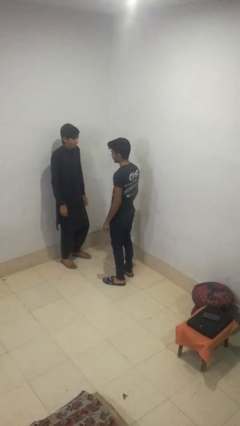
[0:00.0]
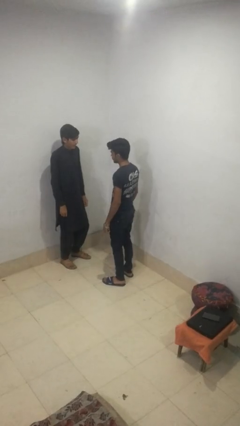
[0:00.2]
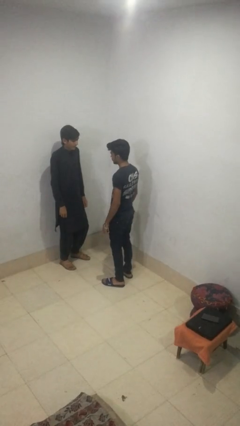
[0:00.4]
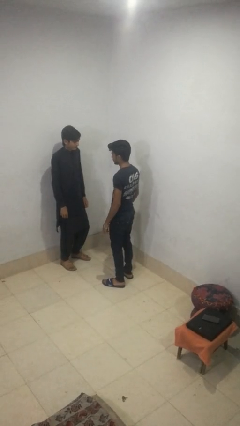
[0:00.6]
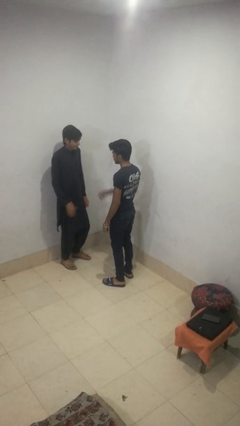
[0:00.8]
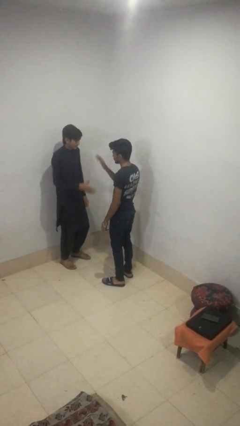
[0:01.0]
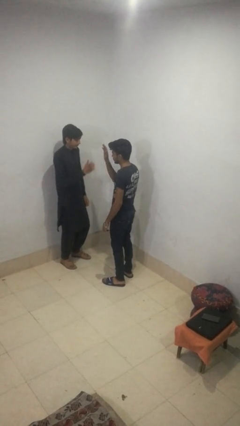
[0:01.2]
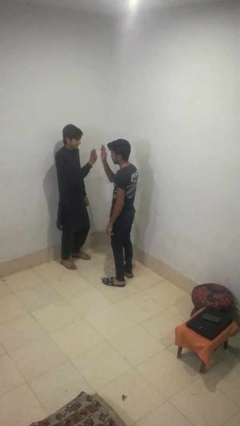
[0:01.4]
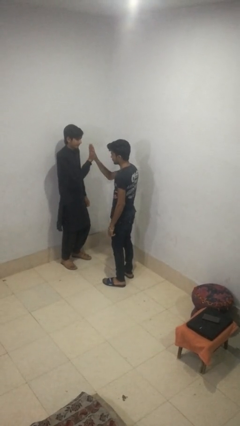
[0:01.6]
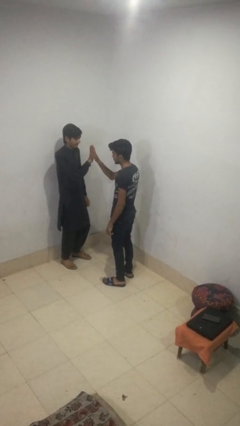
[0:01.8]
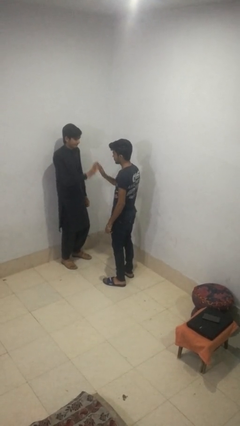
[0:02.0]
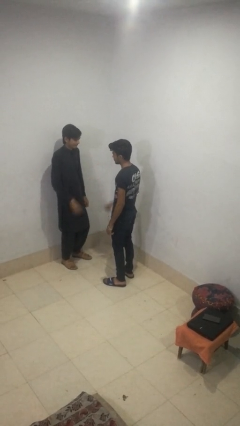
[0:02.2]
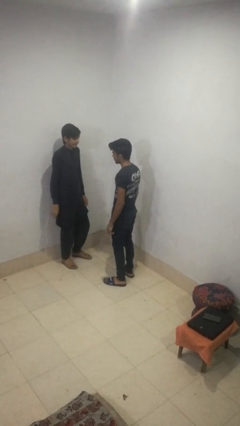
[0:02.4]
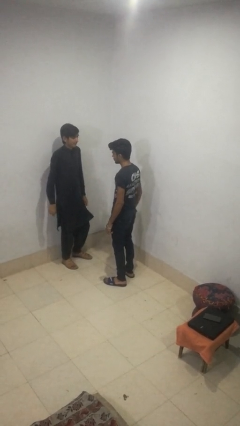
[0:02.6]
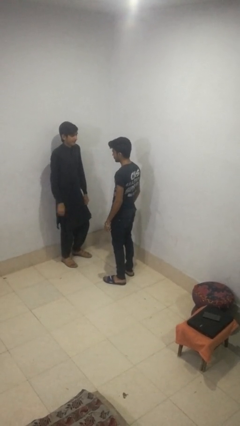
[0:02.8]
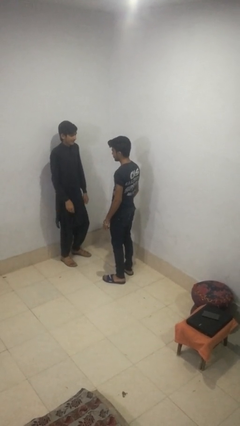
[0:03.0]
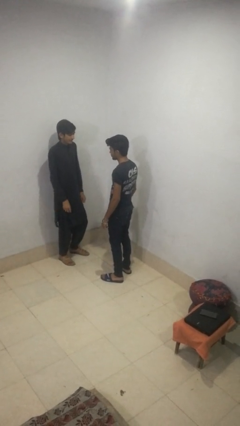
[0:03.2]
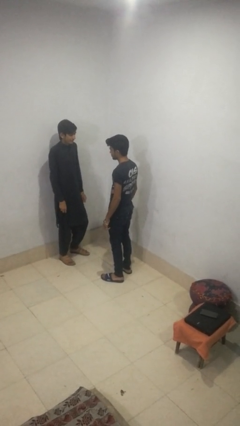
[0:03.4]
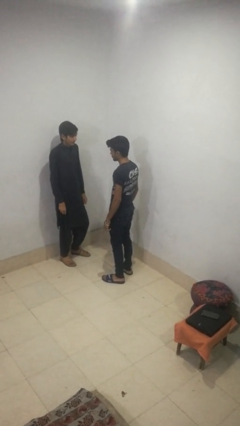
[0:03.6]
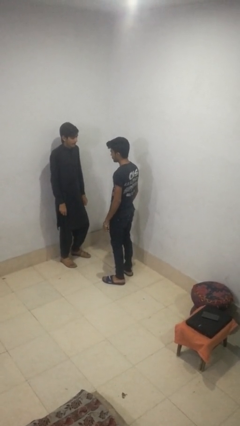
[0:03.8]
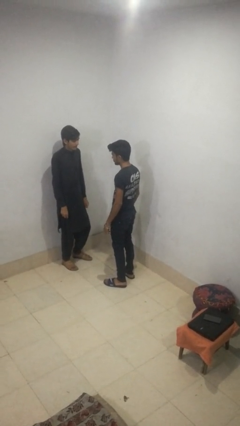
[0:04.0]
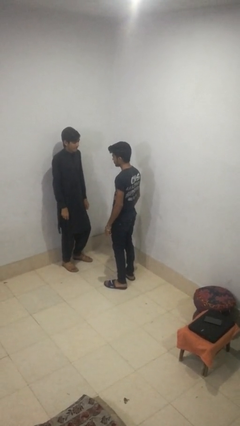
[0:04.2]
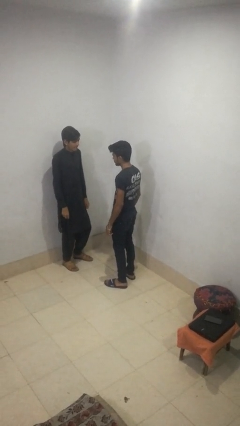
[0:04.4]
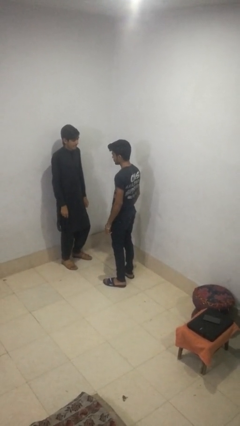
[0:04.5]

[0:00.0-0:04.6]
person highfives hand

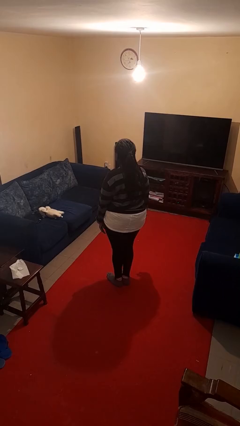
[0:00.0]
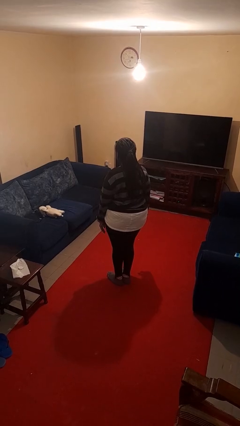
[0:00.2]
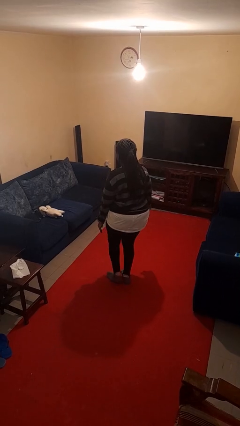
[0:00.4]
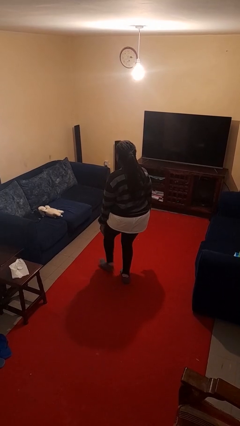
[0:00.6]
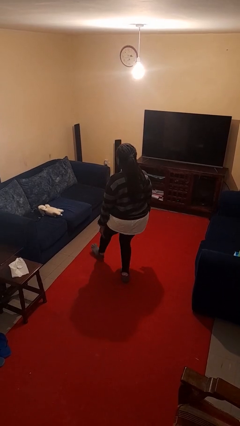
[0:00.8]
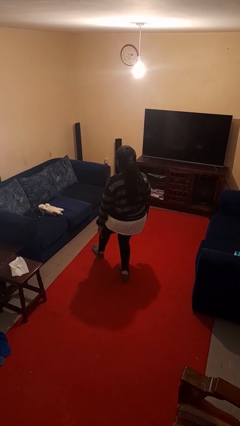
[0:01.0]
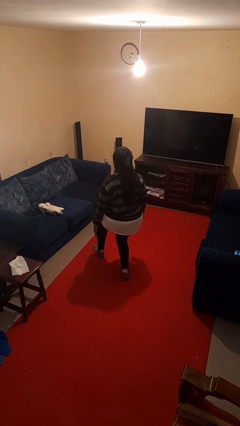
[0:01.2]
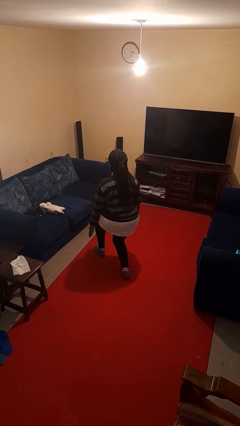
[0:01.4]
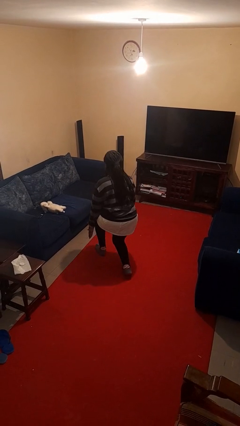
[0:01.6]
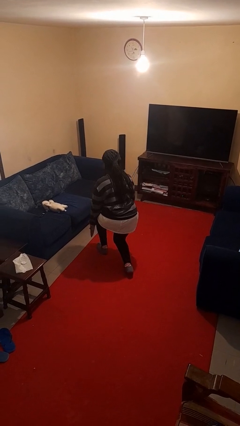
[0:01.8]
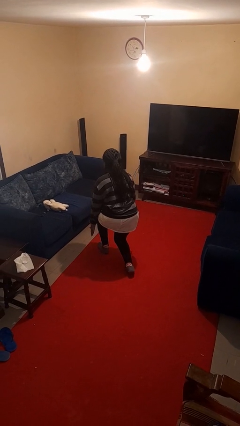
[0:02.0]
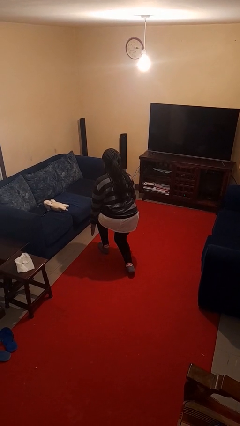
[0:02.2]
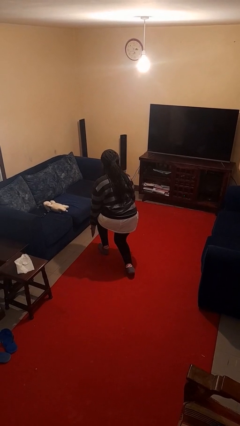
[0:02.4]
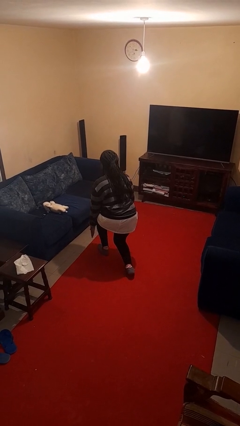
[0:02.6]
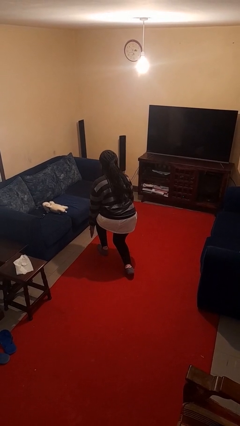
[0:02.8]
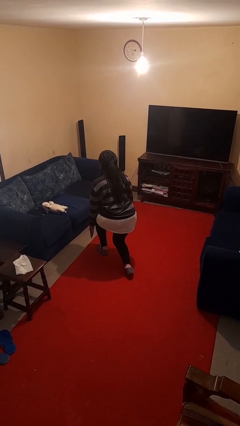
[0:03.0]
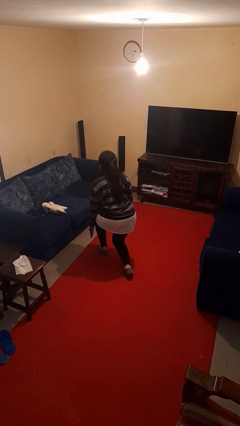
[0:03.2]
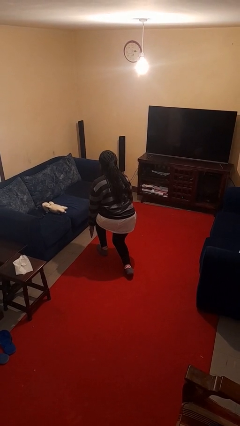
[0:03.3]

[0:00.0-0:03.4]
person exercises with lunges

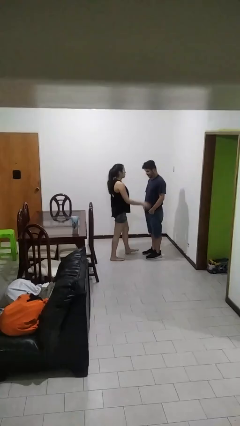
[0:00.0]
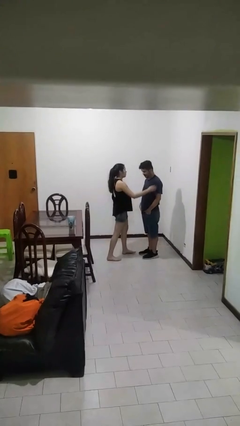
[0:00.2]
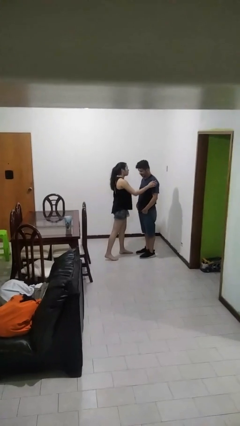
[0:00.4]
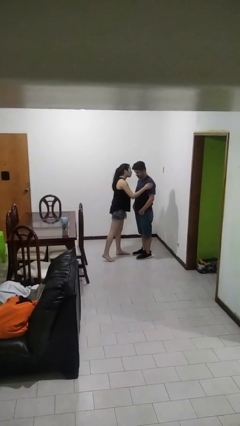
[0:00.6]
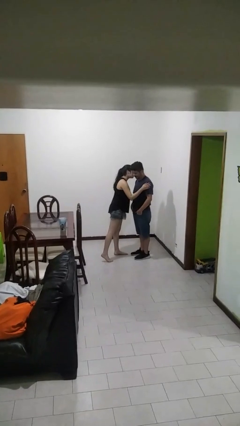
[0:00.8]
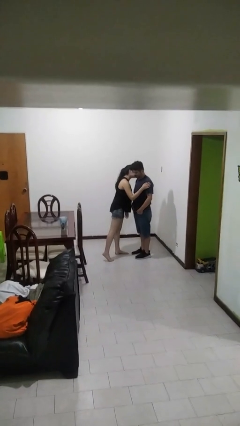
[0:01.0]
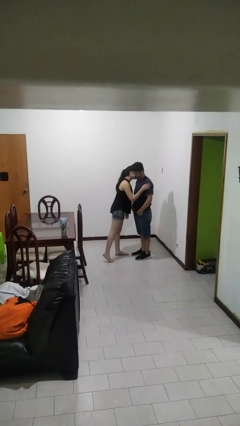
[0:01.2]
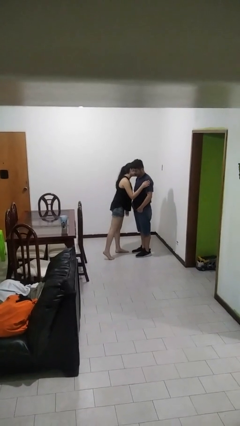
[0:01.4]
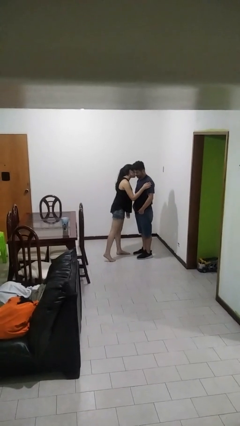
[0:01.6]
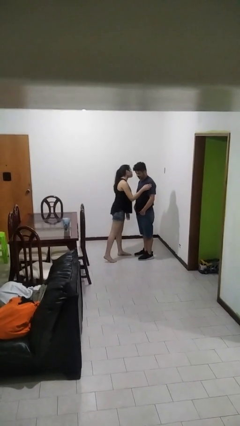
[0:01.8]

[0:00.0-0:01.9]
person kisses cheek of person

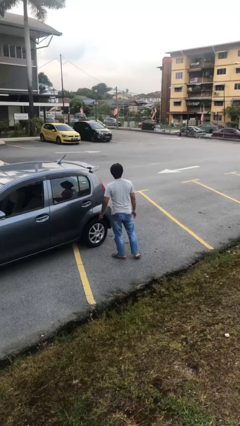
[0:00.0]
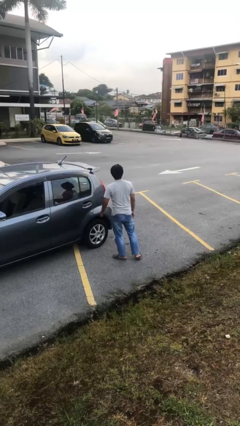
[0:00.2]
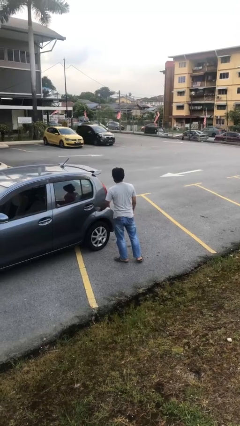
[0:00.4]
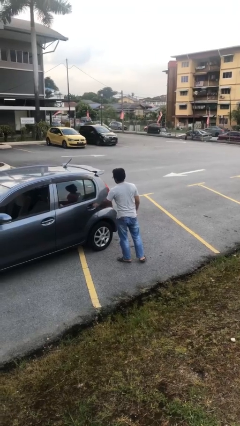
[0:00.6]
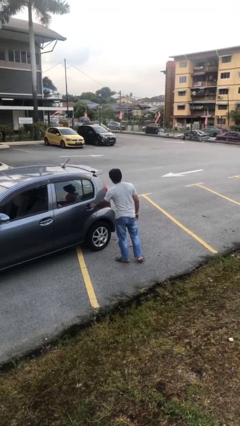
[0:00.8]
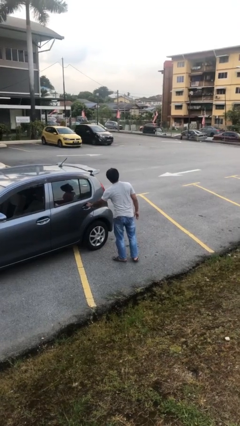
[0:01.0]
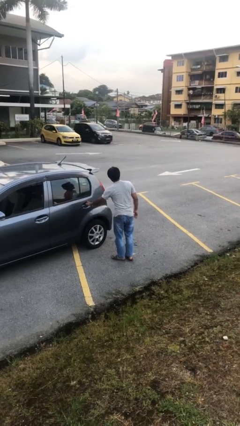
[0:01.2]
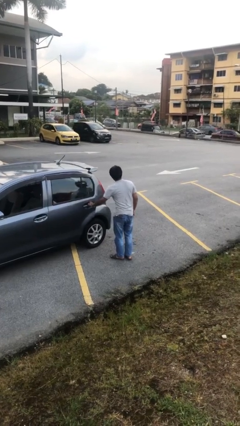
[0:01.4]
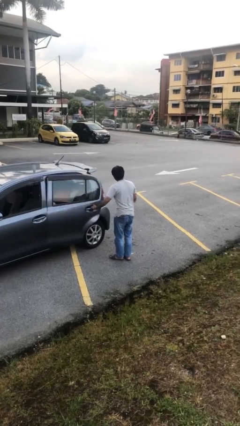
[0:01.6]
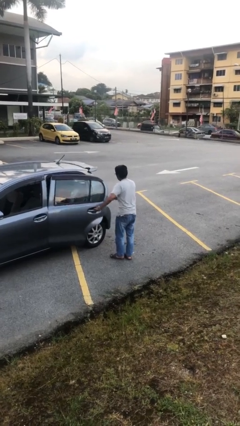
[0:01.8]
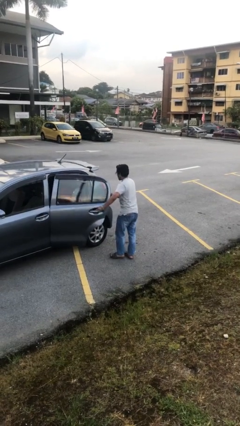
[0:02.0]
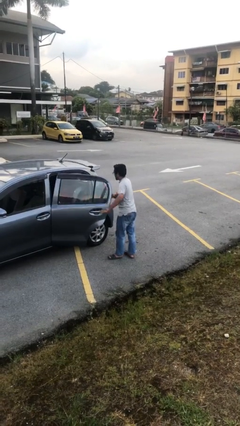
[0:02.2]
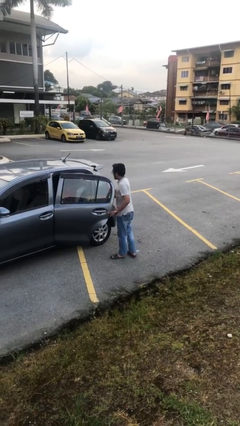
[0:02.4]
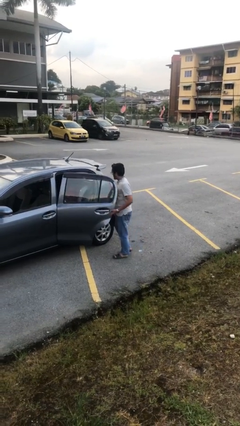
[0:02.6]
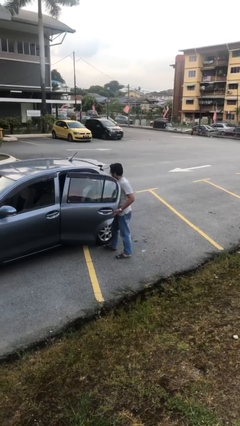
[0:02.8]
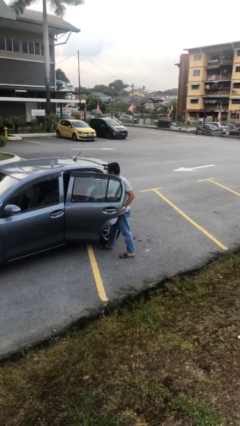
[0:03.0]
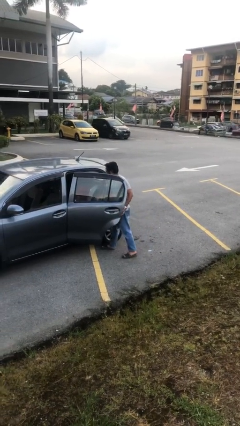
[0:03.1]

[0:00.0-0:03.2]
person opens car door

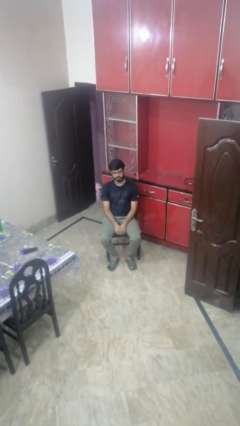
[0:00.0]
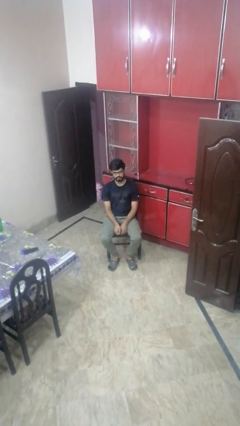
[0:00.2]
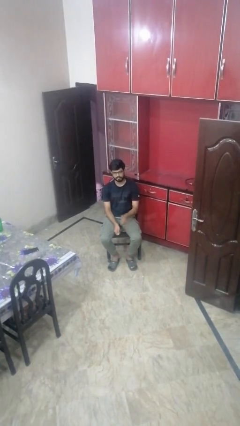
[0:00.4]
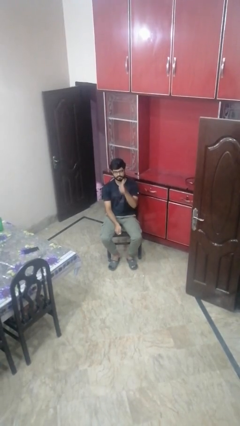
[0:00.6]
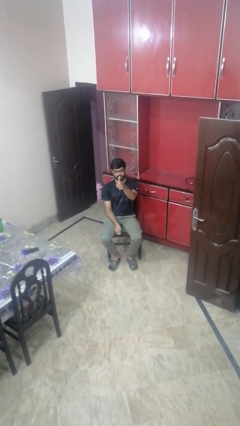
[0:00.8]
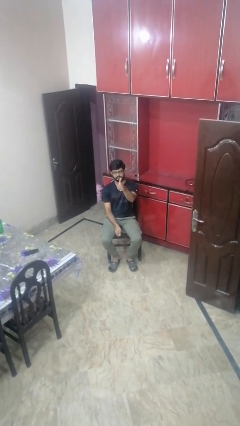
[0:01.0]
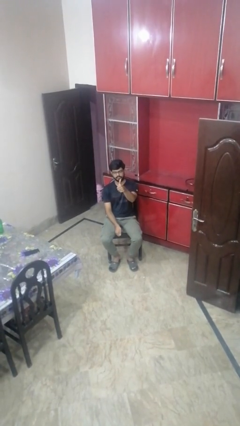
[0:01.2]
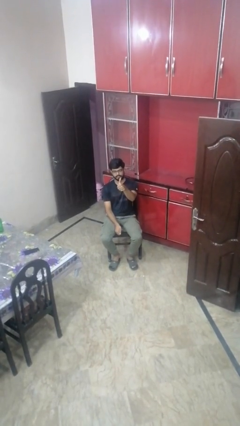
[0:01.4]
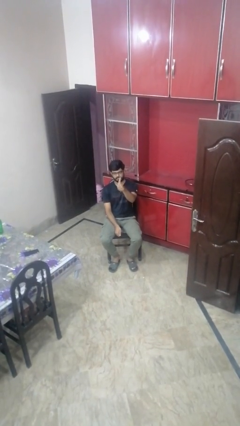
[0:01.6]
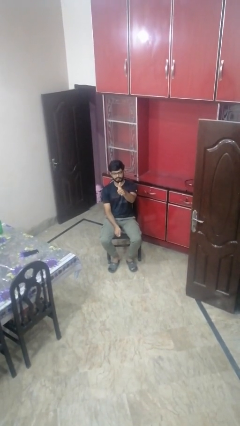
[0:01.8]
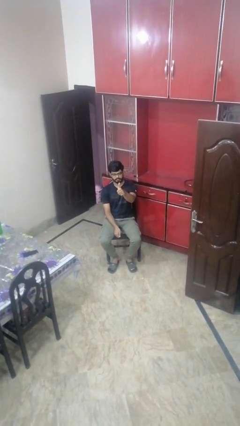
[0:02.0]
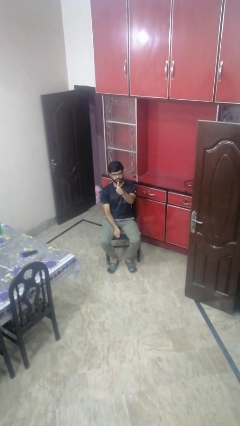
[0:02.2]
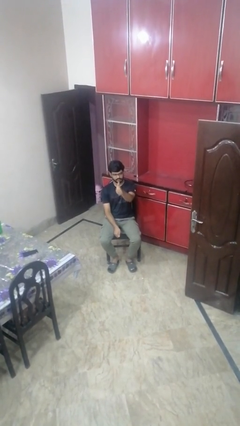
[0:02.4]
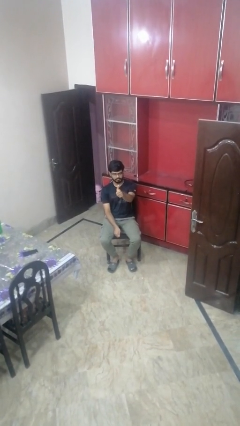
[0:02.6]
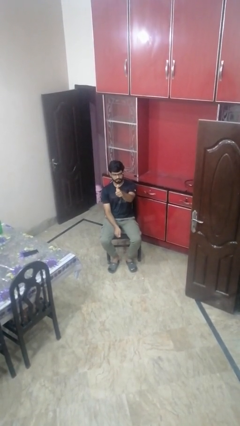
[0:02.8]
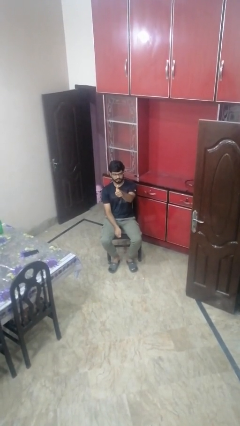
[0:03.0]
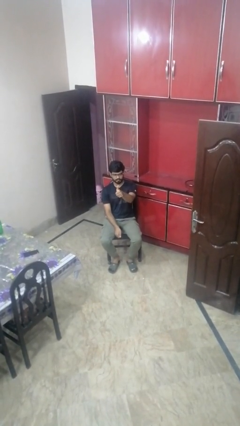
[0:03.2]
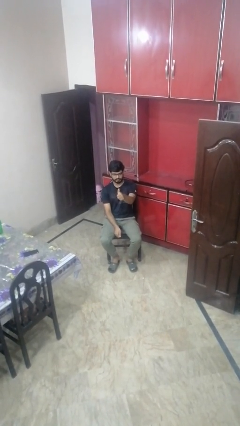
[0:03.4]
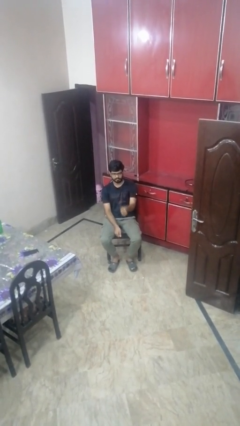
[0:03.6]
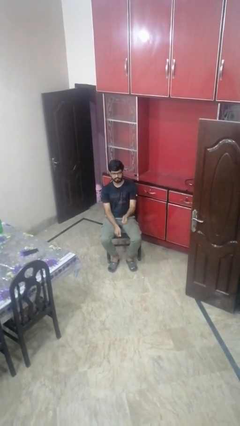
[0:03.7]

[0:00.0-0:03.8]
person gestures thumbs up

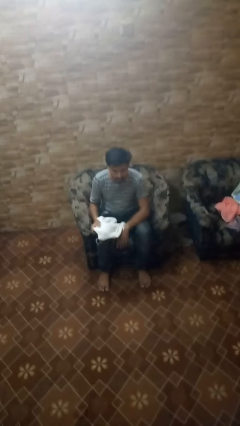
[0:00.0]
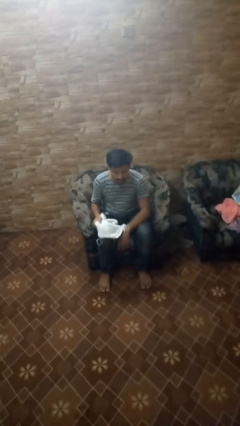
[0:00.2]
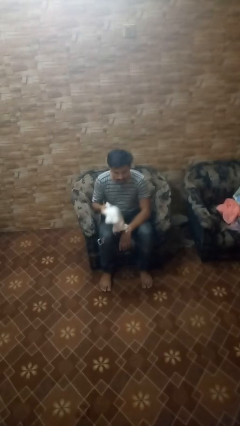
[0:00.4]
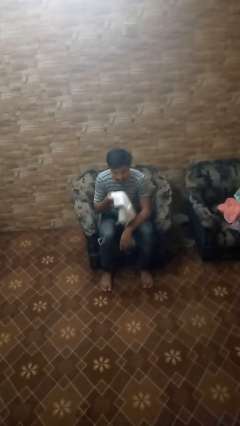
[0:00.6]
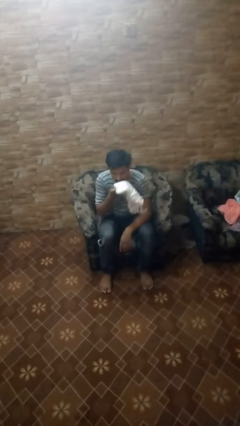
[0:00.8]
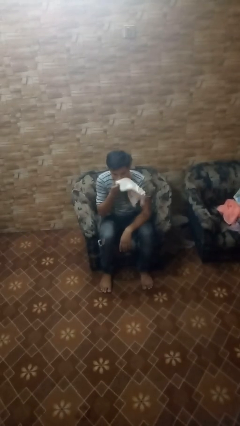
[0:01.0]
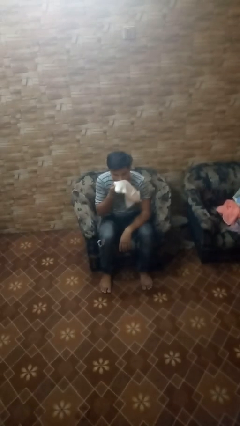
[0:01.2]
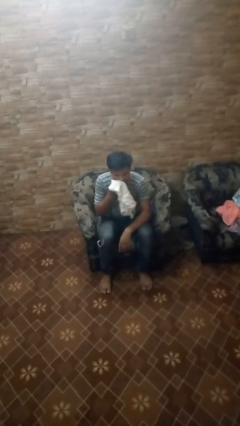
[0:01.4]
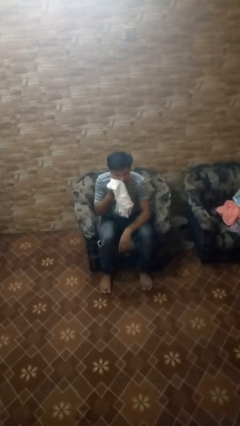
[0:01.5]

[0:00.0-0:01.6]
person wipes mouth with napkin
